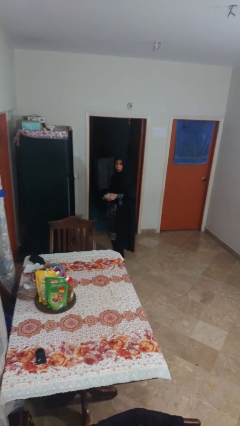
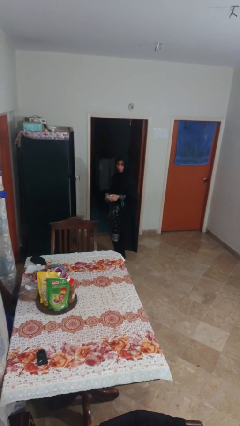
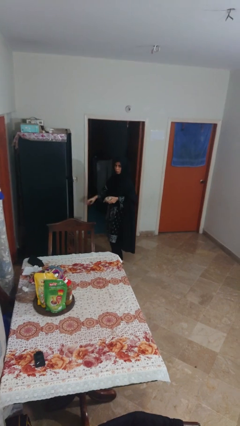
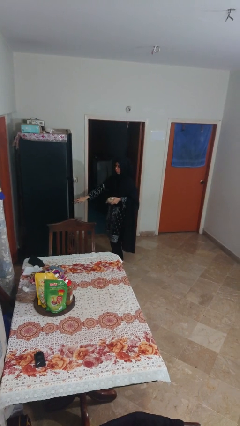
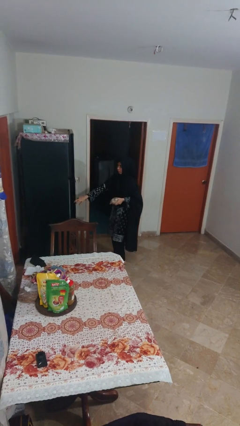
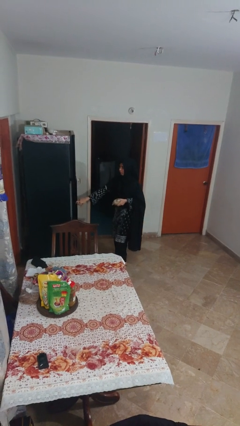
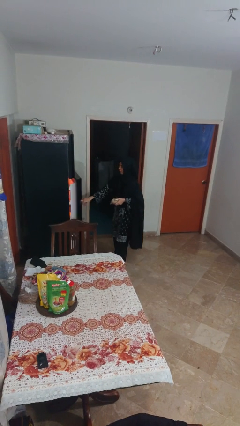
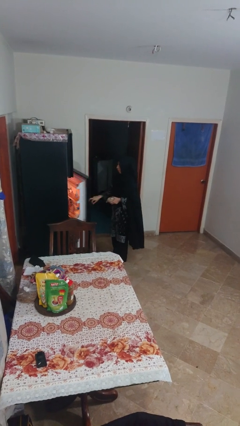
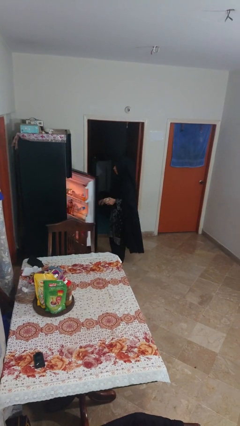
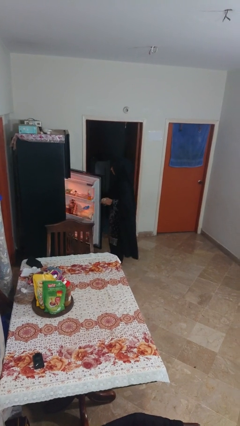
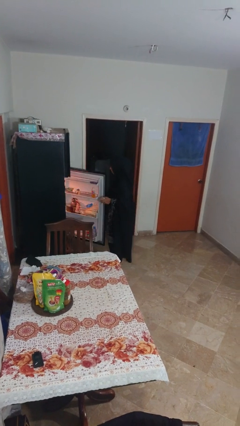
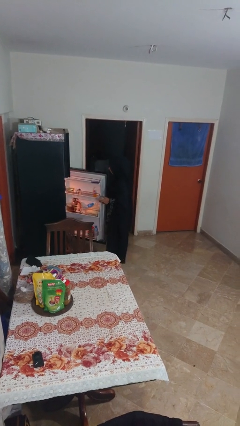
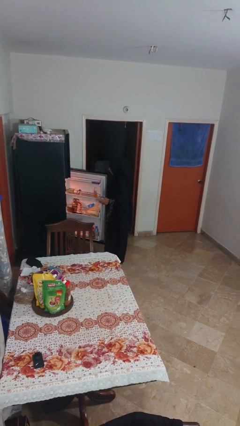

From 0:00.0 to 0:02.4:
person opens refrigerator

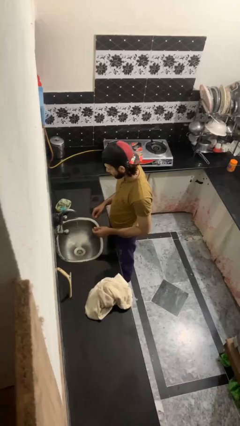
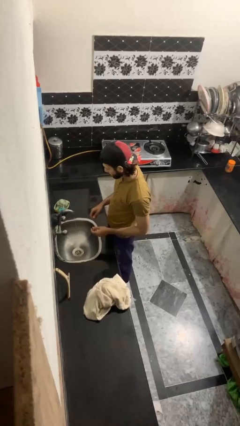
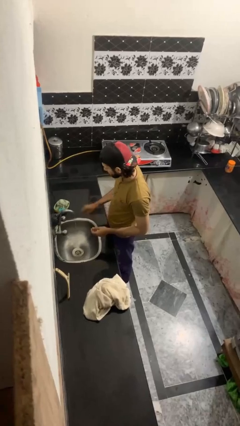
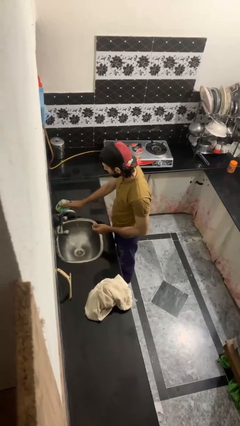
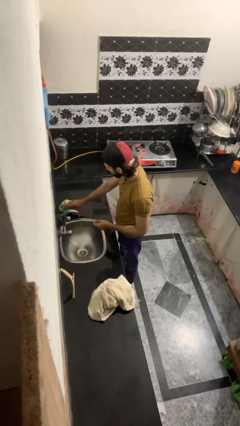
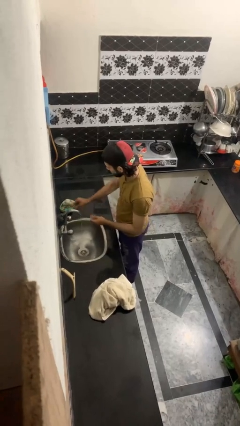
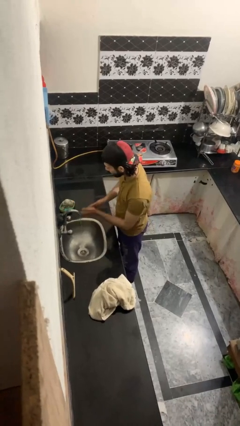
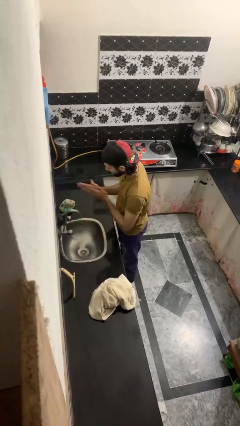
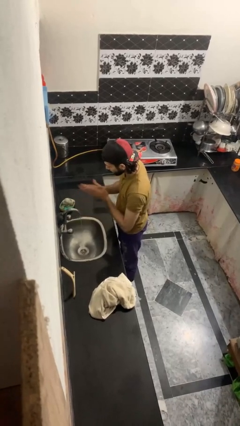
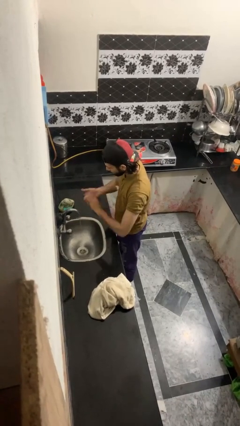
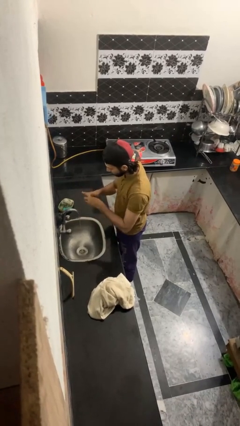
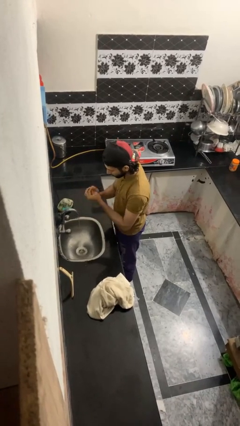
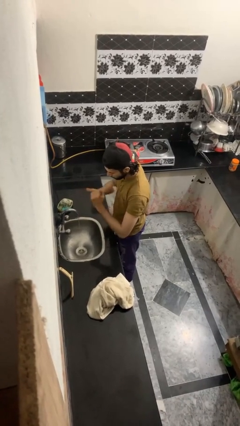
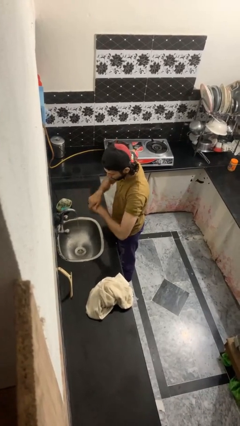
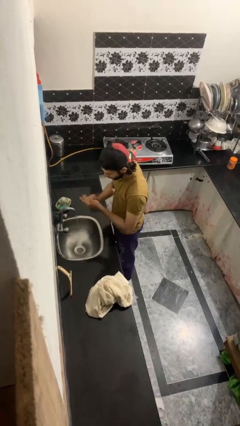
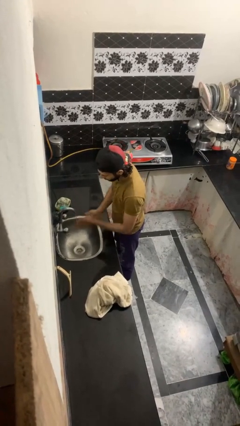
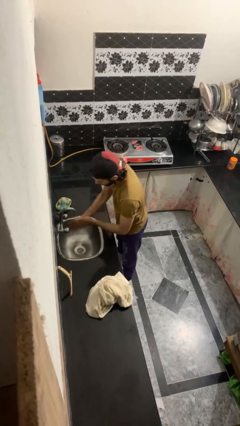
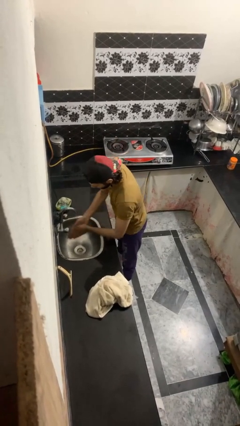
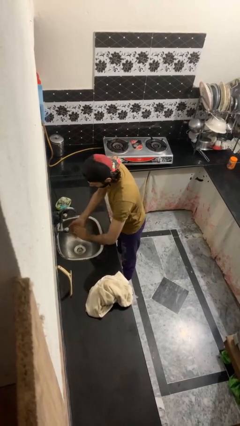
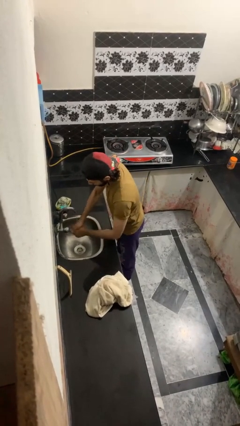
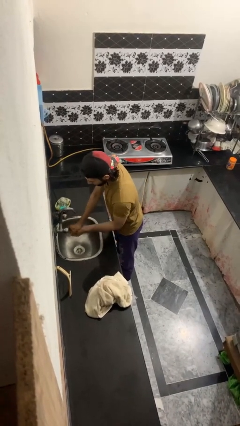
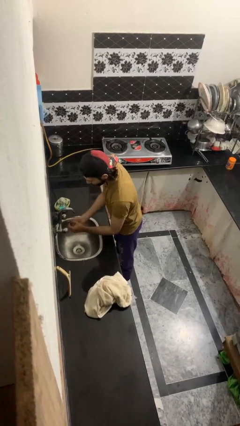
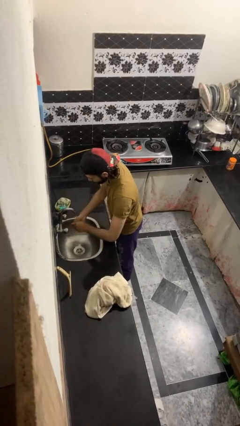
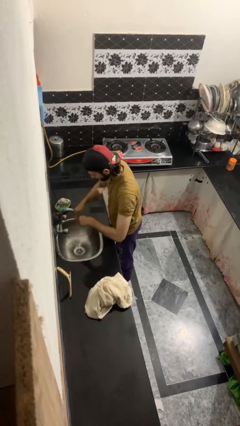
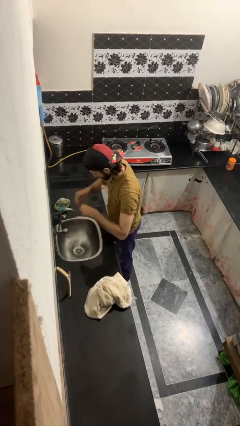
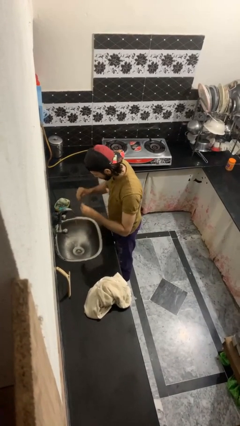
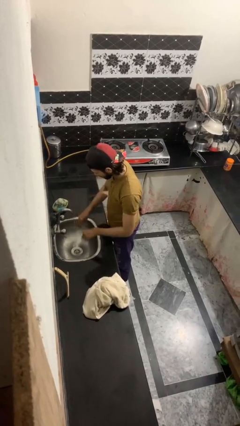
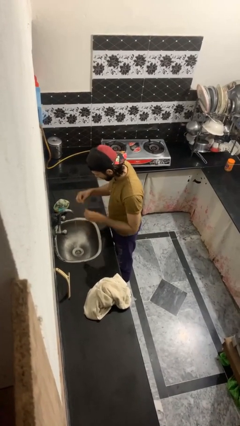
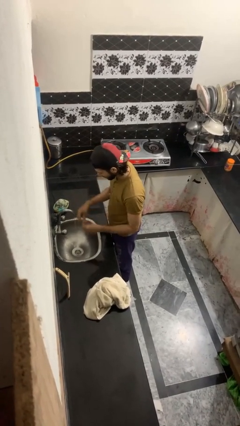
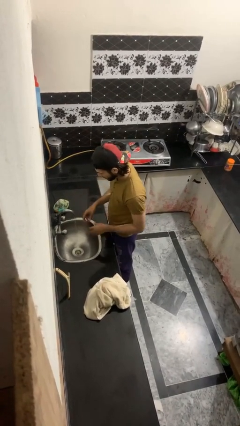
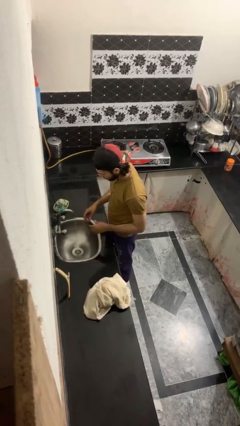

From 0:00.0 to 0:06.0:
person washes hands

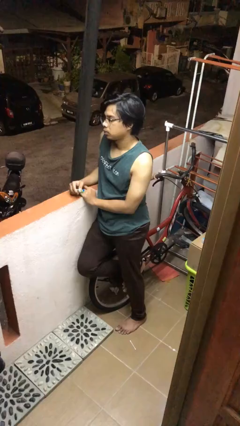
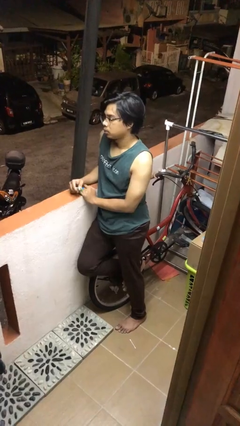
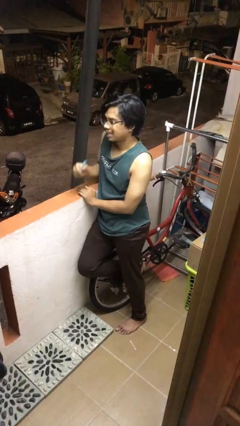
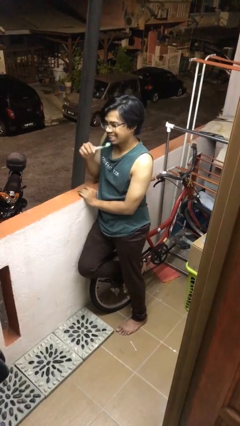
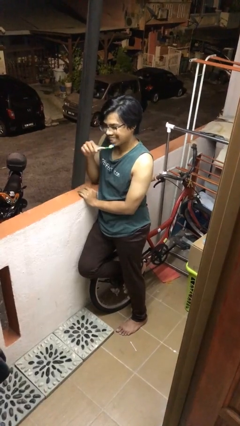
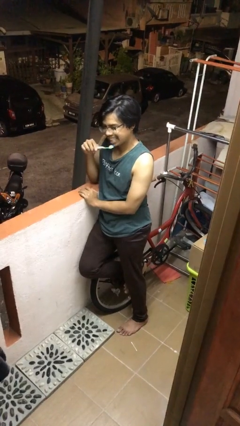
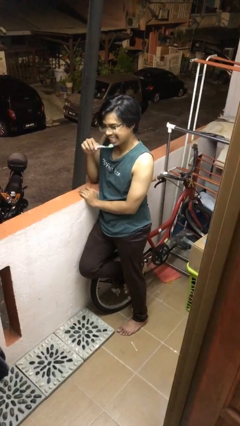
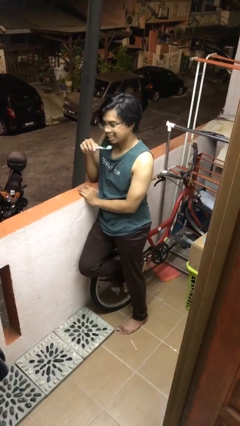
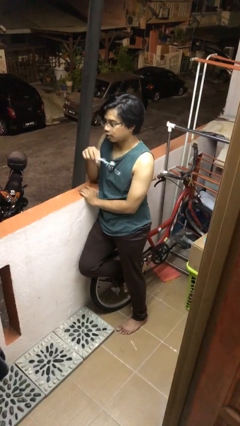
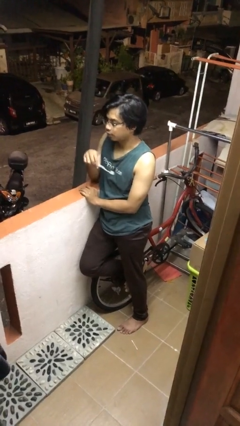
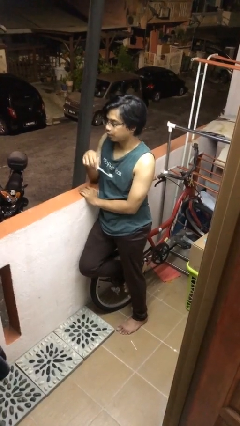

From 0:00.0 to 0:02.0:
person brushes teeth

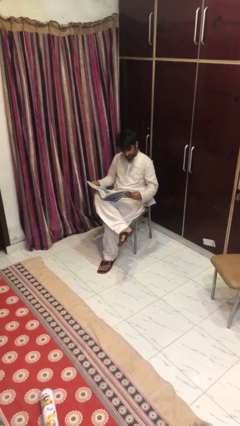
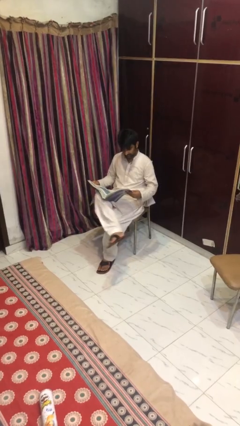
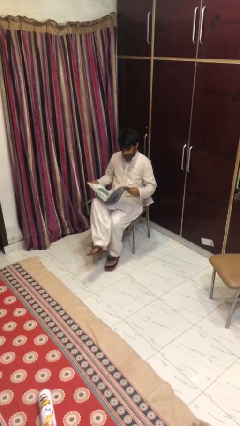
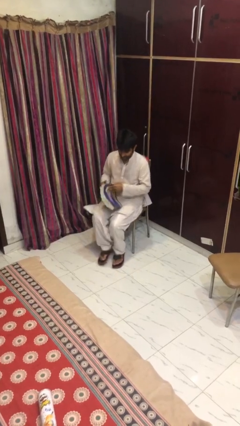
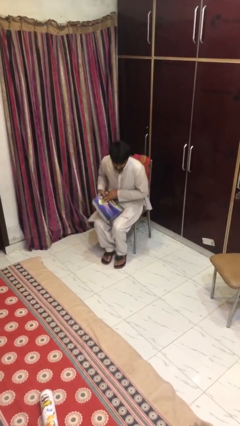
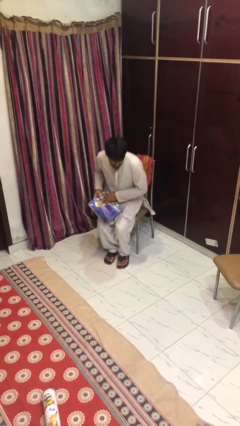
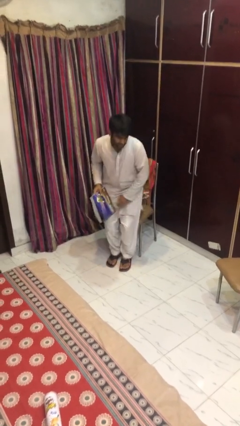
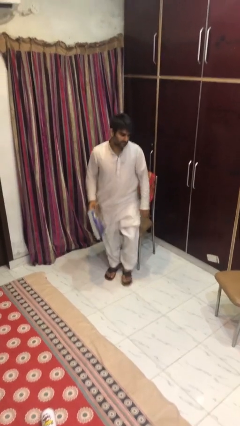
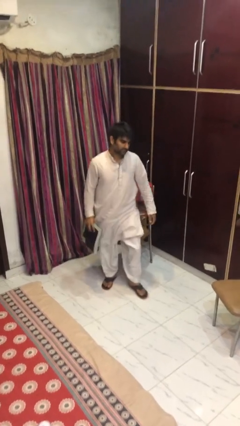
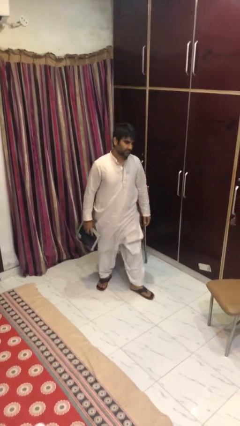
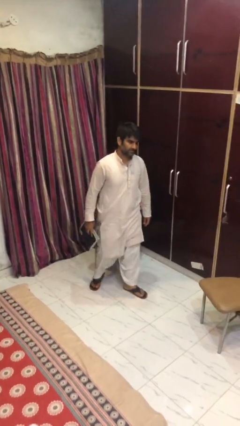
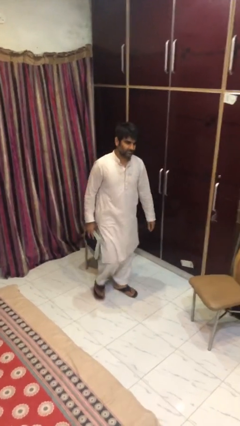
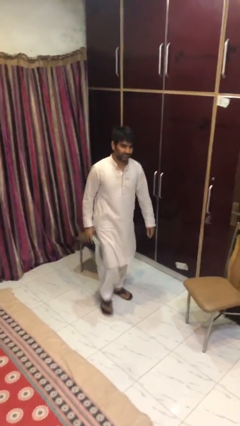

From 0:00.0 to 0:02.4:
person stands up

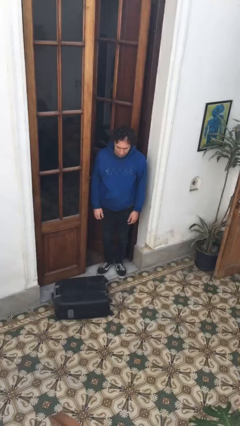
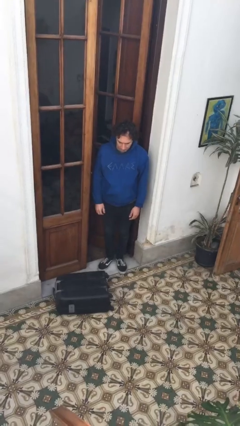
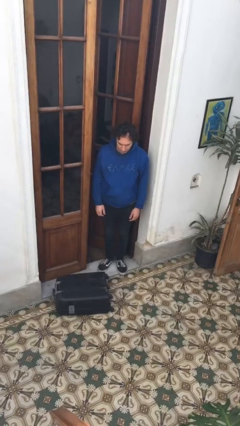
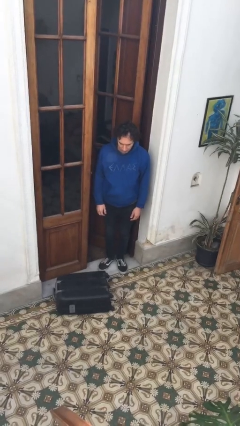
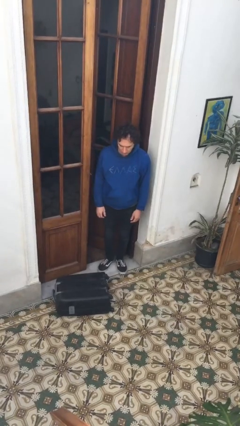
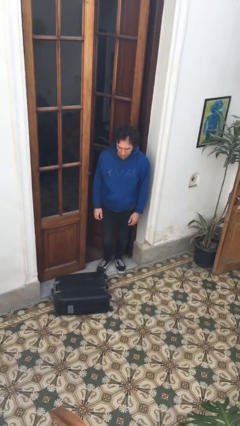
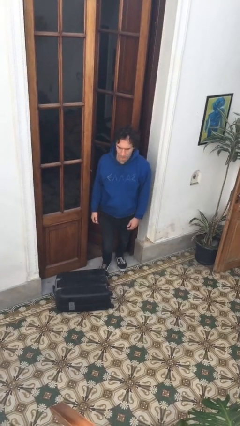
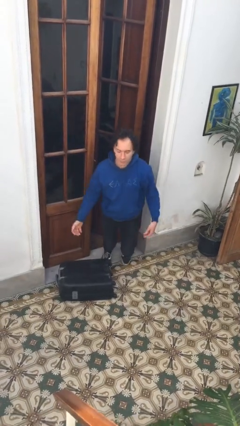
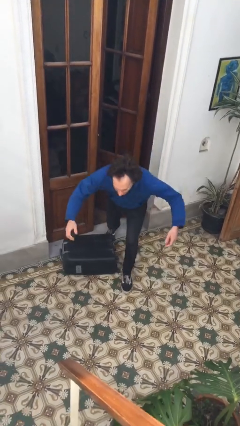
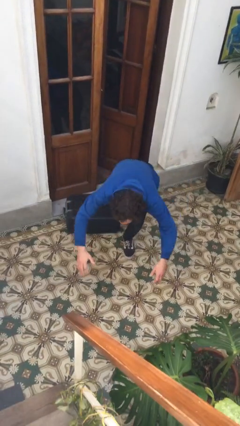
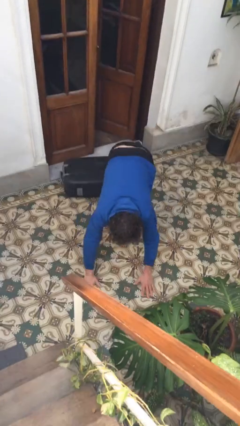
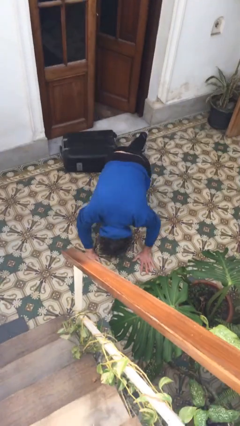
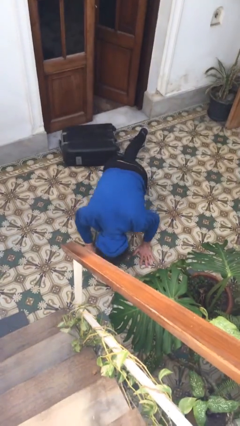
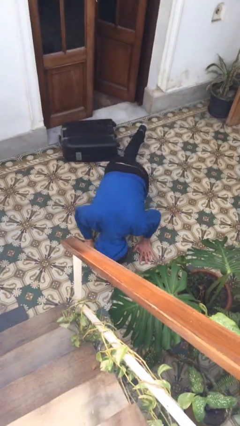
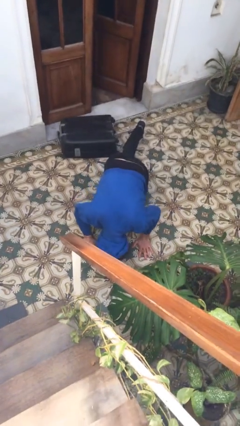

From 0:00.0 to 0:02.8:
person trips on object on floor

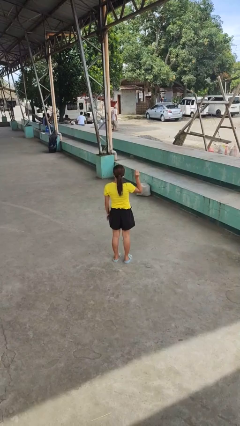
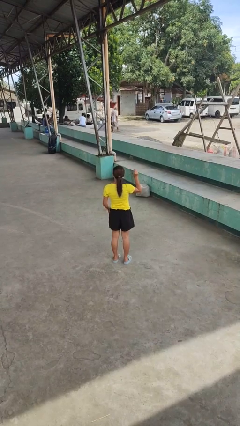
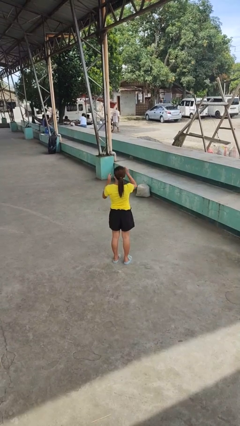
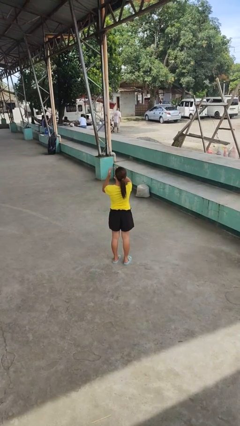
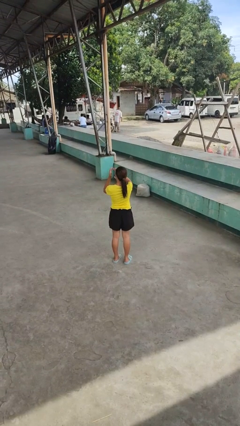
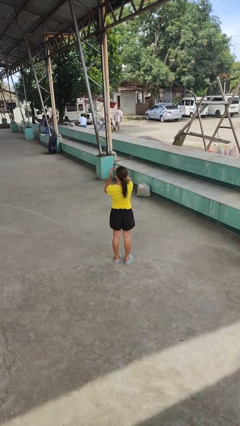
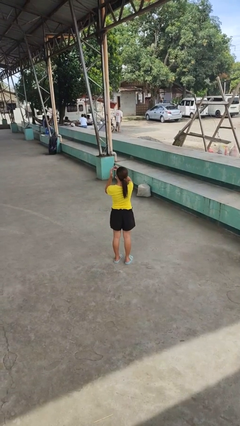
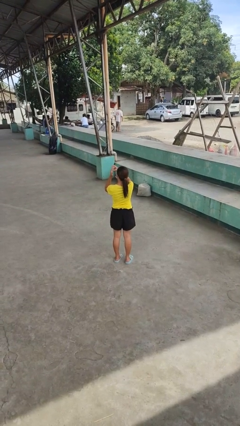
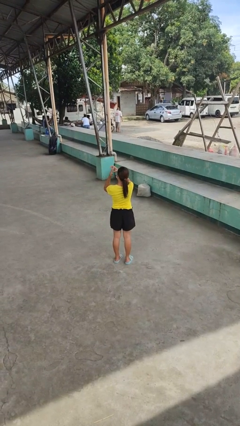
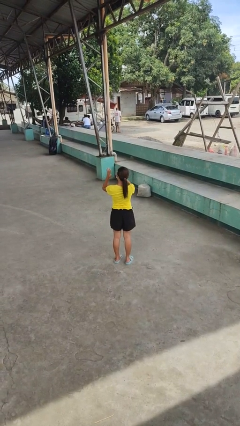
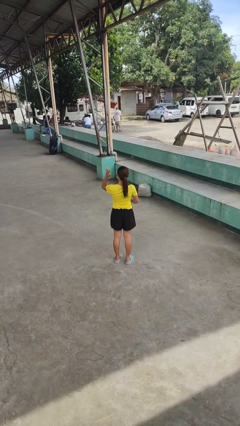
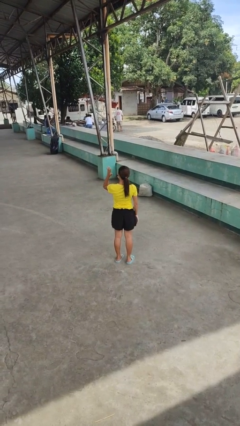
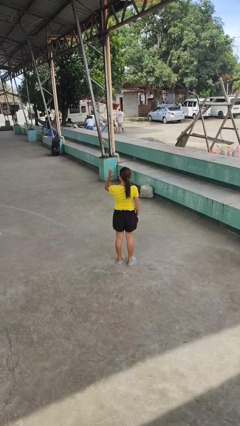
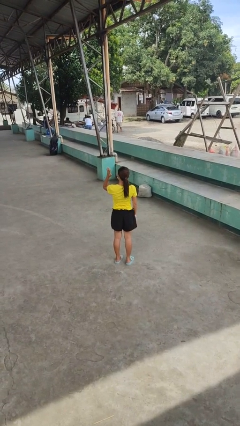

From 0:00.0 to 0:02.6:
person puts on ring
